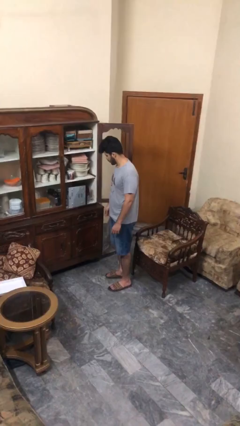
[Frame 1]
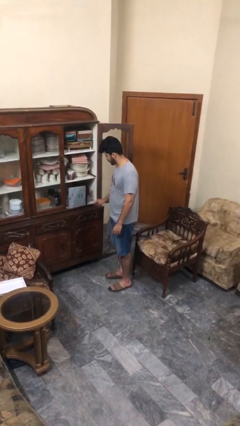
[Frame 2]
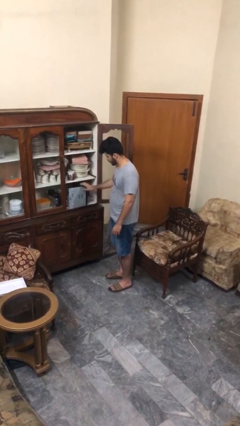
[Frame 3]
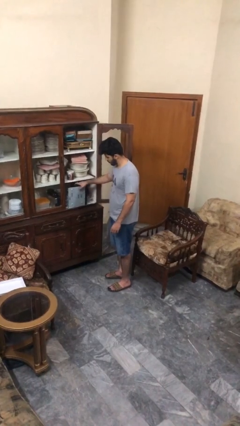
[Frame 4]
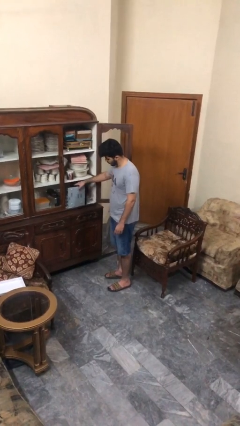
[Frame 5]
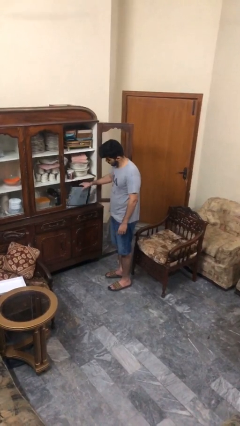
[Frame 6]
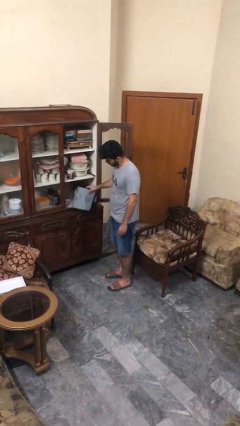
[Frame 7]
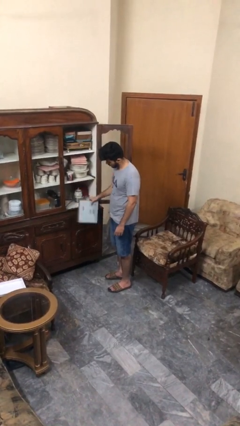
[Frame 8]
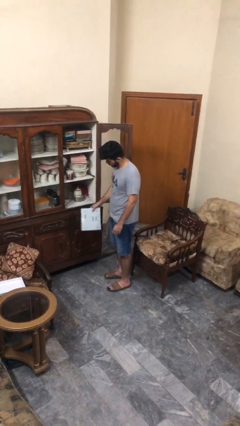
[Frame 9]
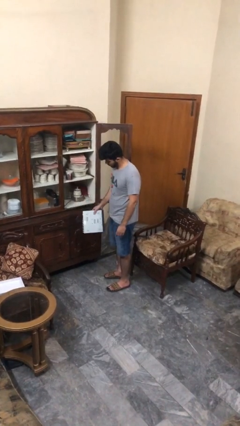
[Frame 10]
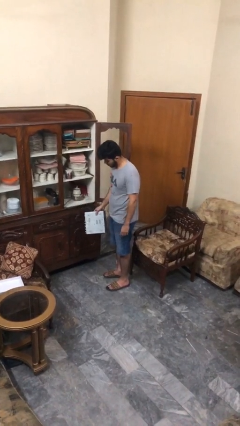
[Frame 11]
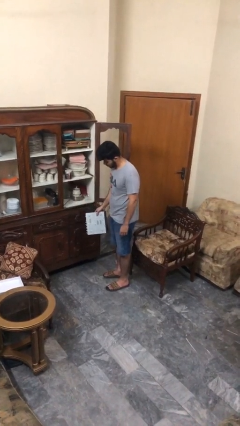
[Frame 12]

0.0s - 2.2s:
person picks up object from cabinet

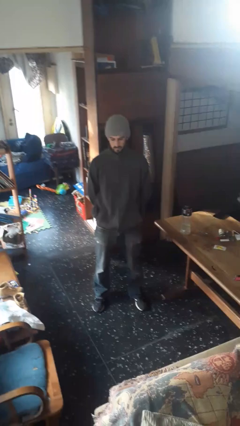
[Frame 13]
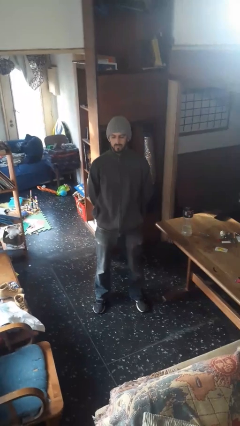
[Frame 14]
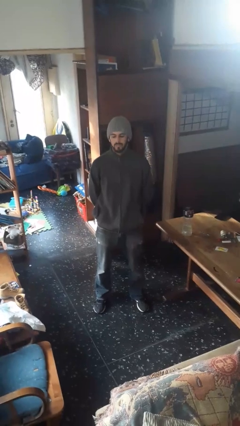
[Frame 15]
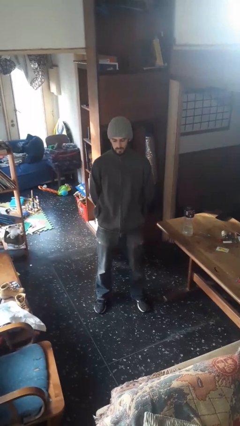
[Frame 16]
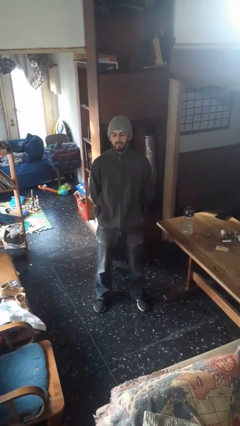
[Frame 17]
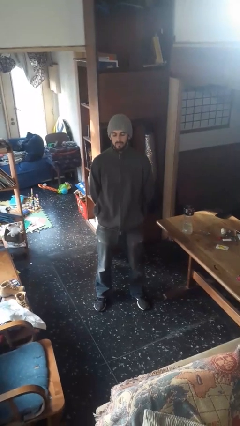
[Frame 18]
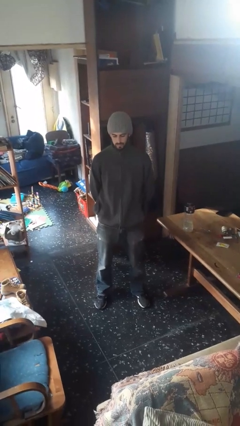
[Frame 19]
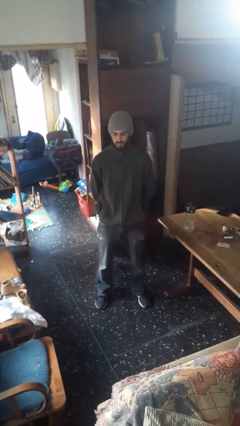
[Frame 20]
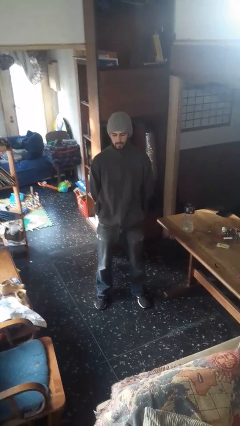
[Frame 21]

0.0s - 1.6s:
person nods head

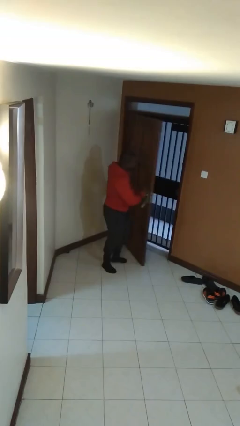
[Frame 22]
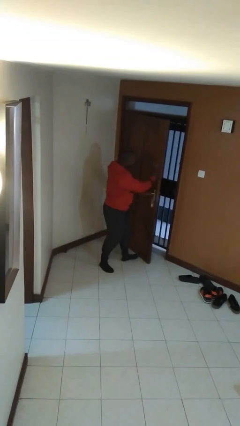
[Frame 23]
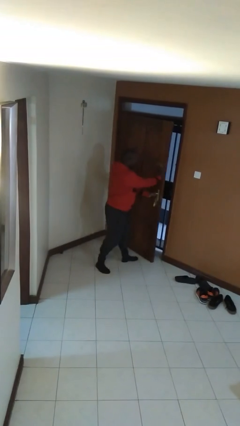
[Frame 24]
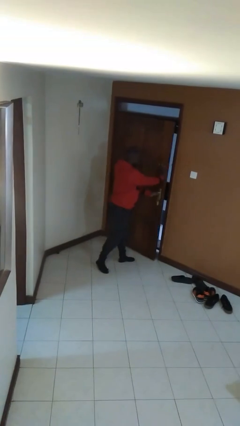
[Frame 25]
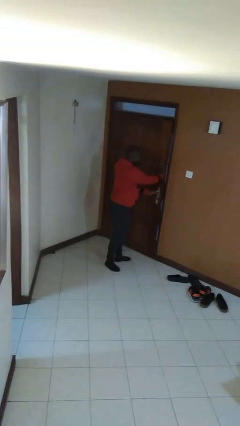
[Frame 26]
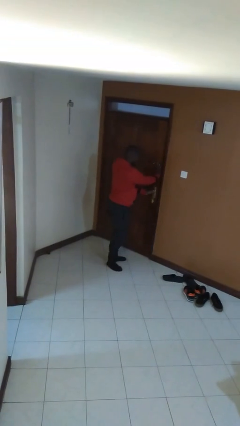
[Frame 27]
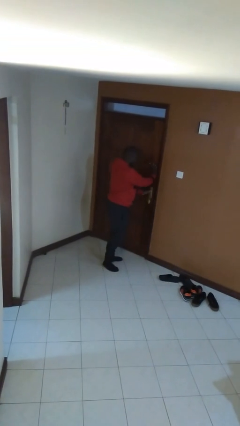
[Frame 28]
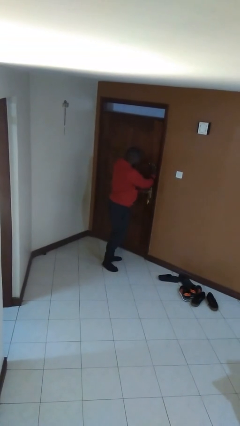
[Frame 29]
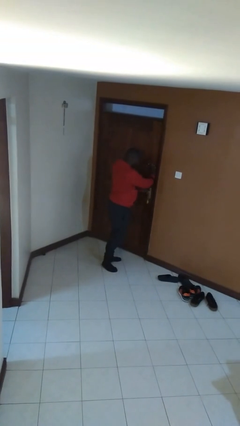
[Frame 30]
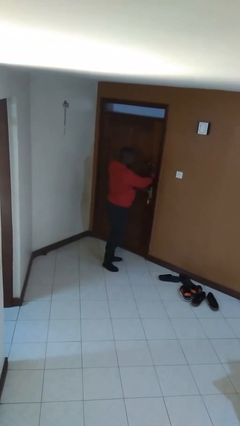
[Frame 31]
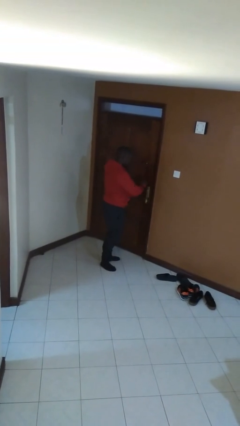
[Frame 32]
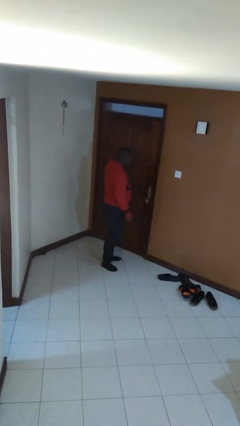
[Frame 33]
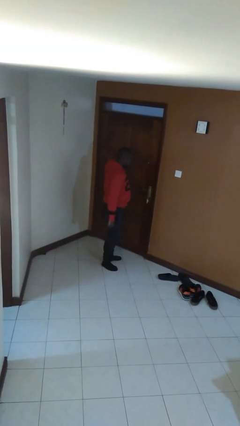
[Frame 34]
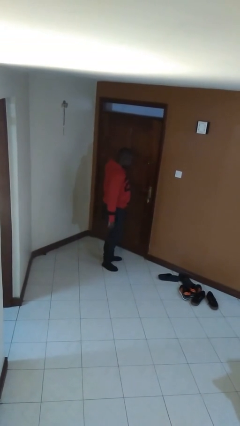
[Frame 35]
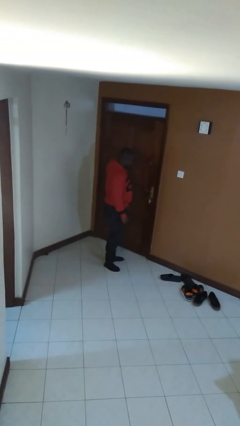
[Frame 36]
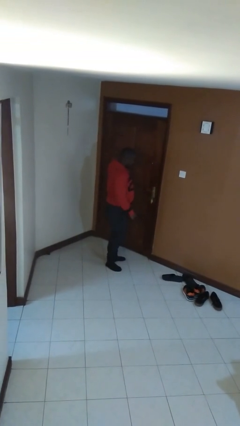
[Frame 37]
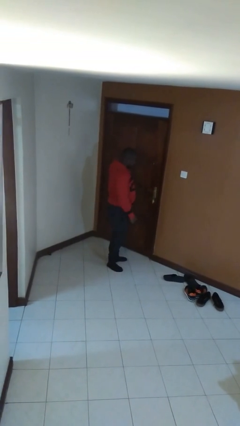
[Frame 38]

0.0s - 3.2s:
person closes facility door

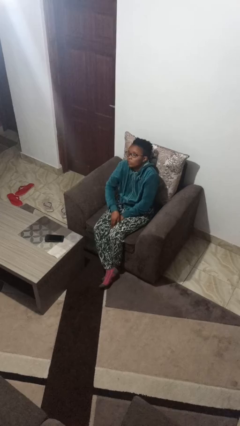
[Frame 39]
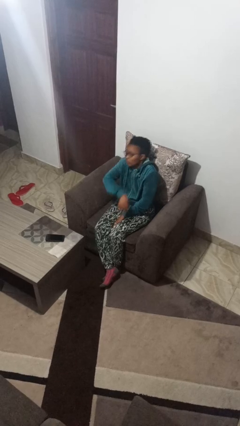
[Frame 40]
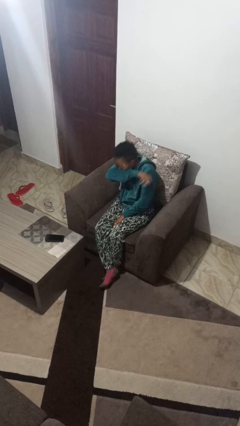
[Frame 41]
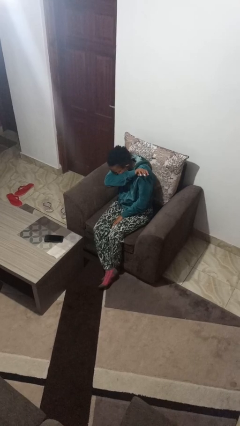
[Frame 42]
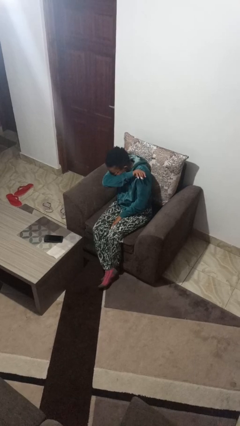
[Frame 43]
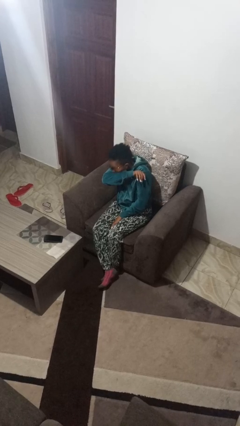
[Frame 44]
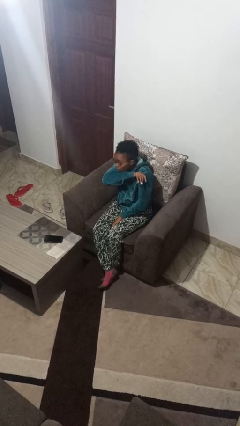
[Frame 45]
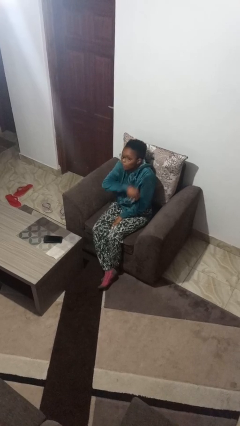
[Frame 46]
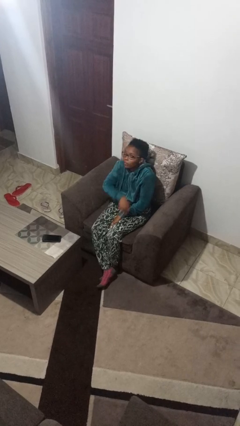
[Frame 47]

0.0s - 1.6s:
person sneezes into arm

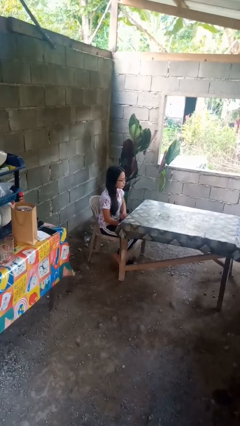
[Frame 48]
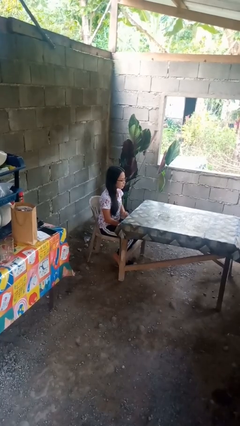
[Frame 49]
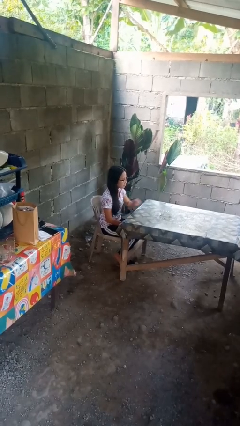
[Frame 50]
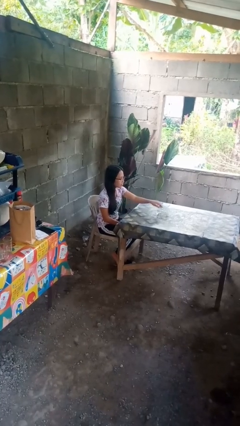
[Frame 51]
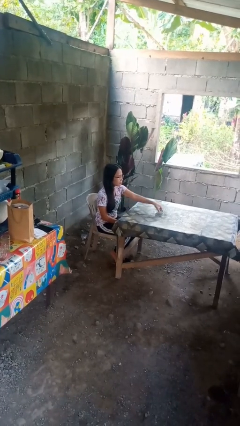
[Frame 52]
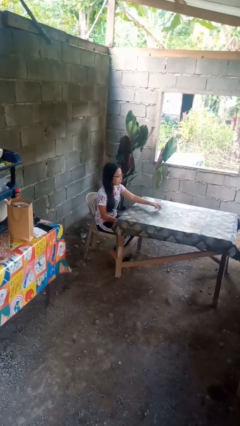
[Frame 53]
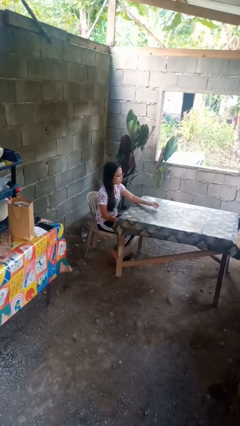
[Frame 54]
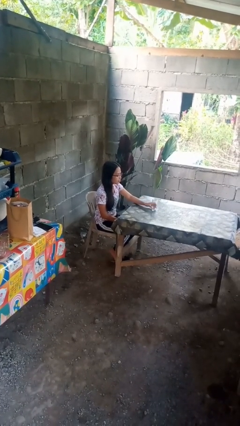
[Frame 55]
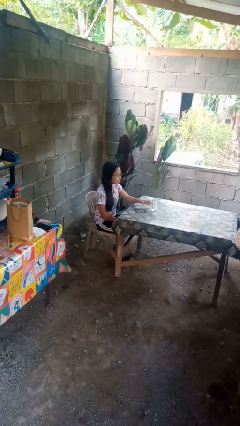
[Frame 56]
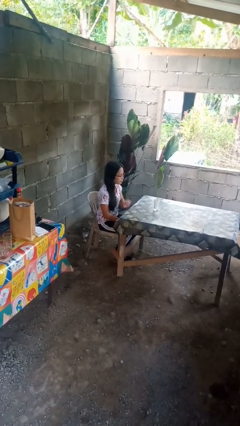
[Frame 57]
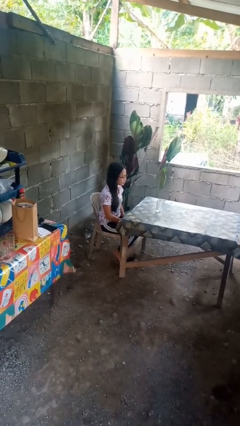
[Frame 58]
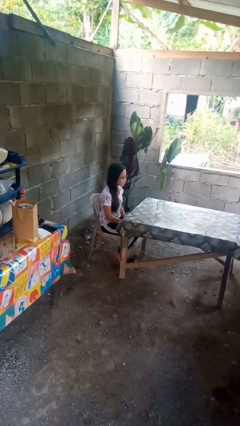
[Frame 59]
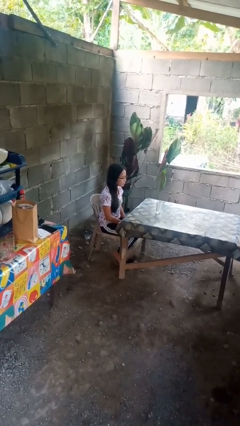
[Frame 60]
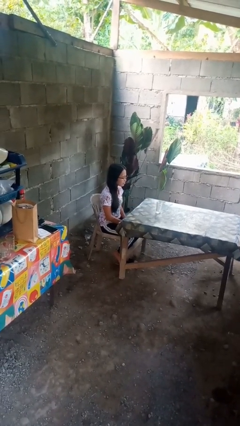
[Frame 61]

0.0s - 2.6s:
person sets upright glass

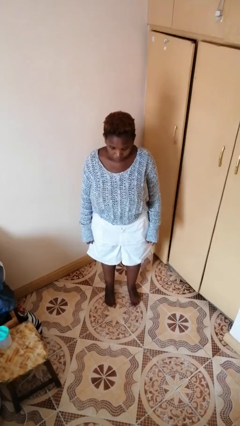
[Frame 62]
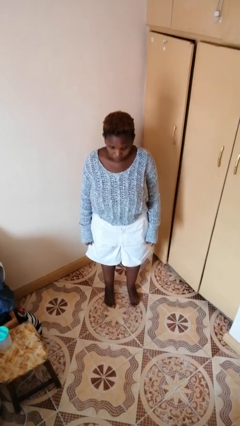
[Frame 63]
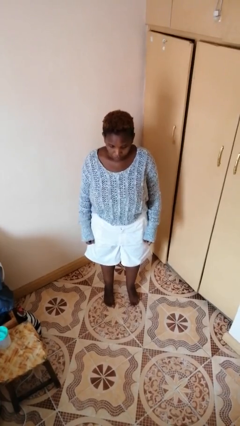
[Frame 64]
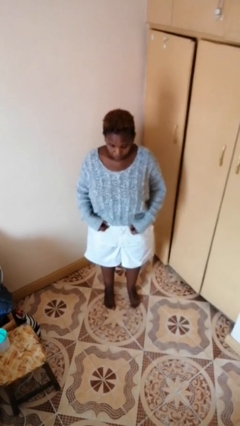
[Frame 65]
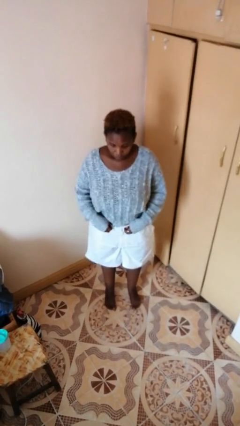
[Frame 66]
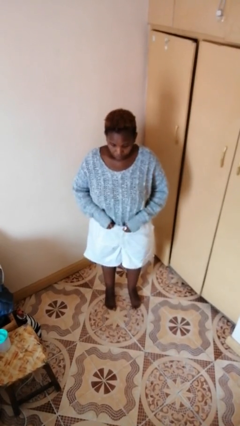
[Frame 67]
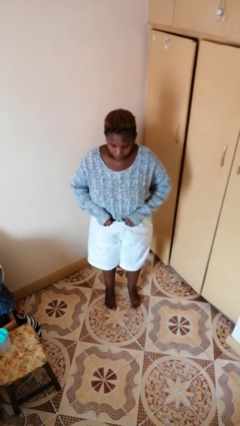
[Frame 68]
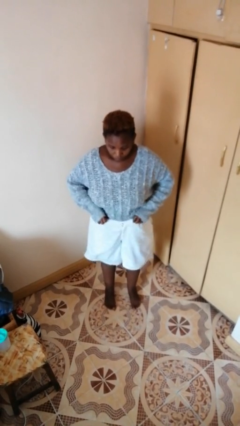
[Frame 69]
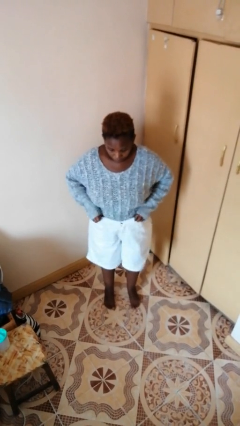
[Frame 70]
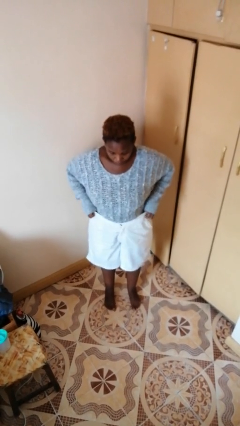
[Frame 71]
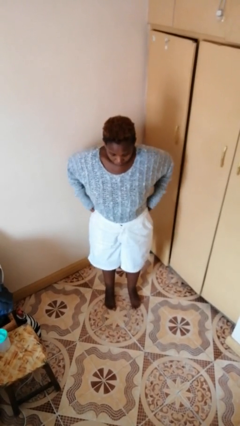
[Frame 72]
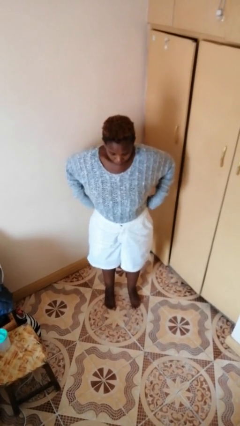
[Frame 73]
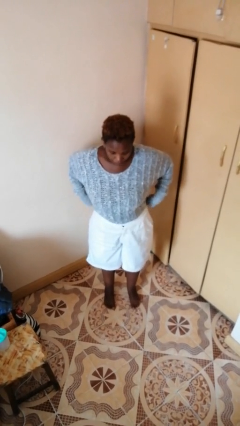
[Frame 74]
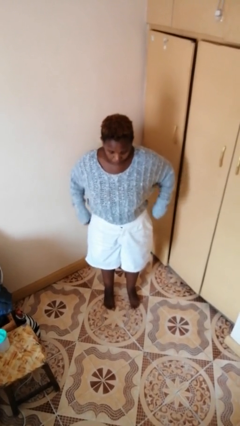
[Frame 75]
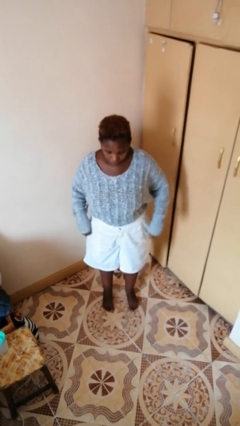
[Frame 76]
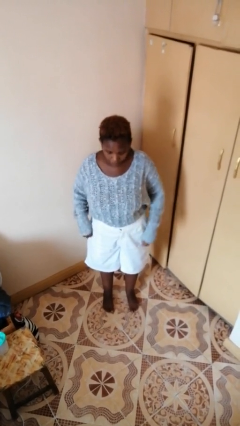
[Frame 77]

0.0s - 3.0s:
person hikes up pants

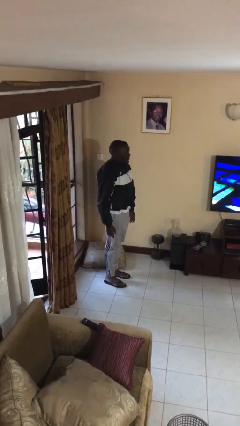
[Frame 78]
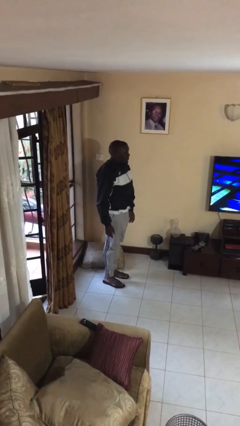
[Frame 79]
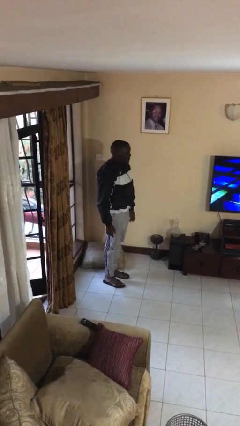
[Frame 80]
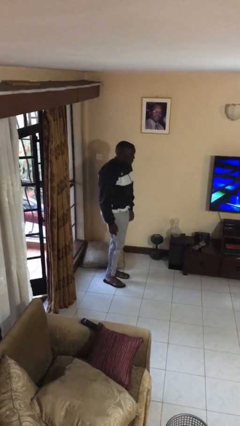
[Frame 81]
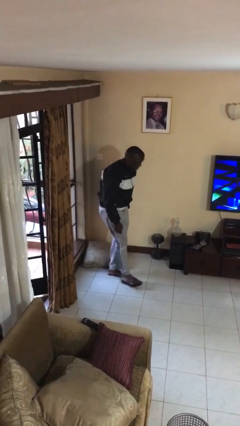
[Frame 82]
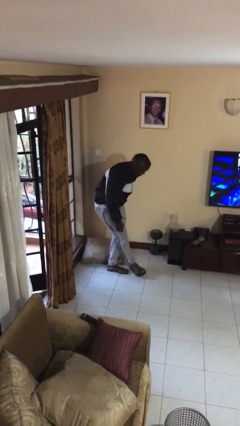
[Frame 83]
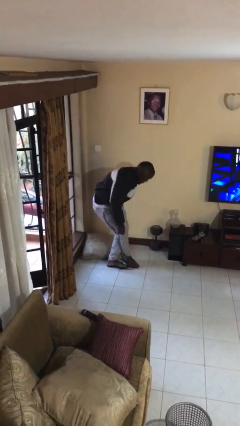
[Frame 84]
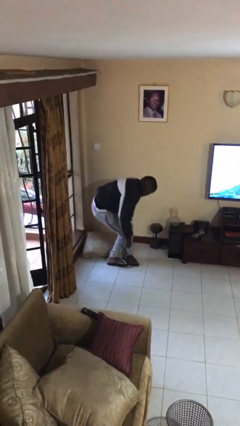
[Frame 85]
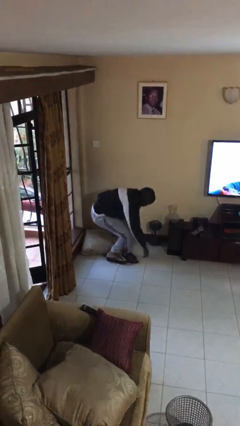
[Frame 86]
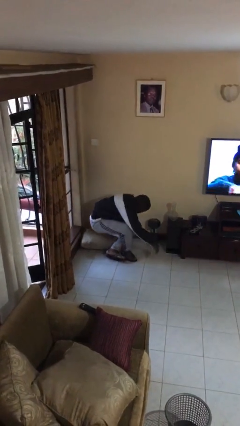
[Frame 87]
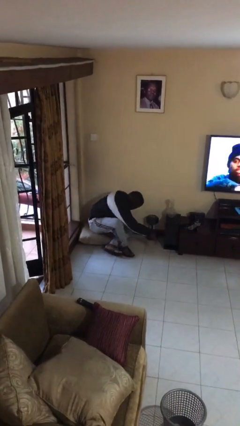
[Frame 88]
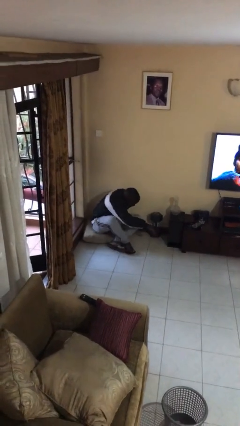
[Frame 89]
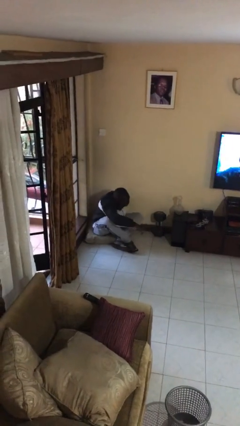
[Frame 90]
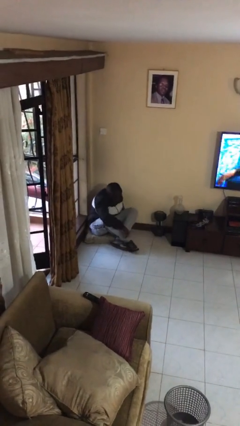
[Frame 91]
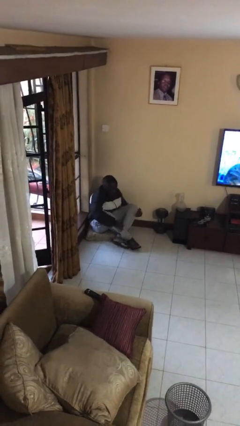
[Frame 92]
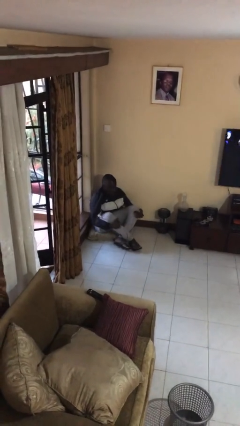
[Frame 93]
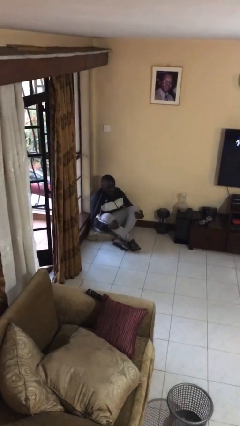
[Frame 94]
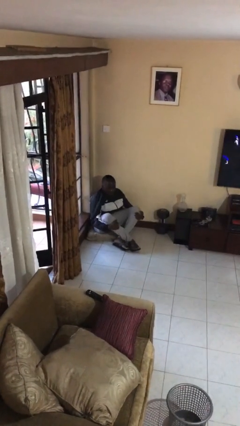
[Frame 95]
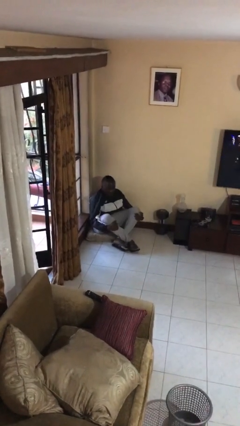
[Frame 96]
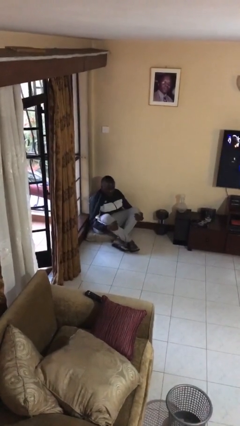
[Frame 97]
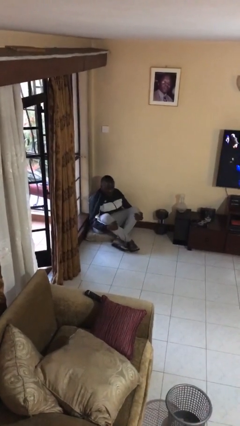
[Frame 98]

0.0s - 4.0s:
person sits crisscross
